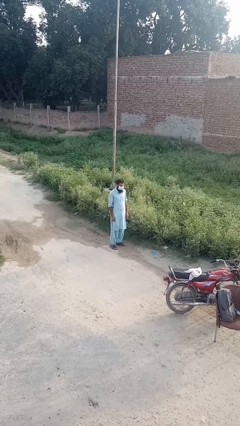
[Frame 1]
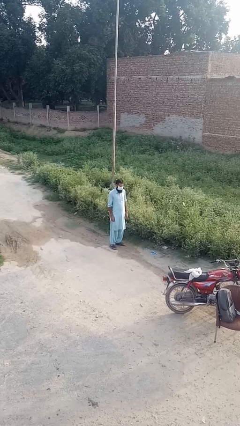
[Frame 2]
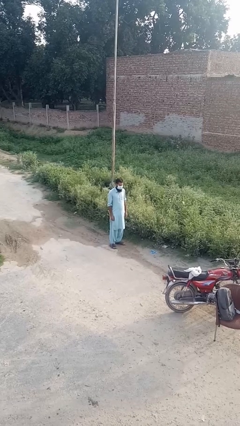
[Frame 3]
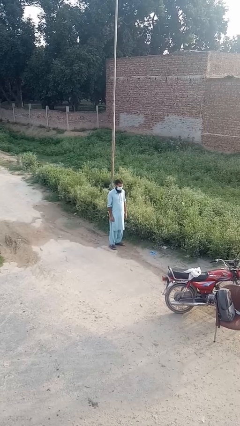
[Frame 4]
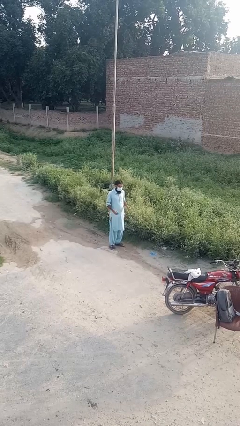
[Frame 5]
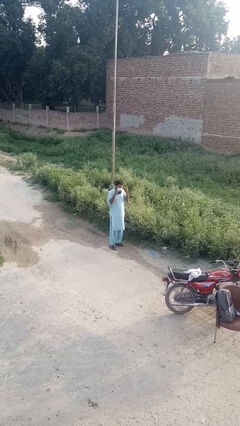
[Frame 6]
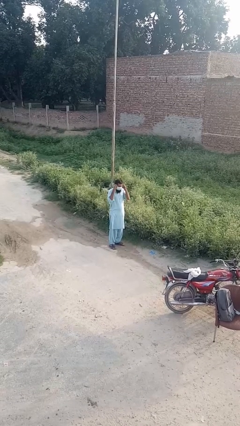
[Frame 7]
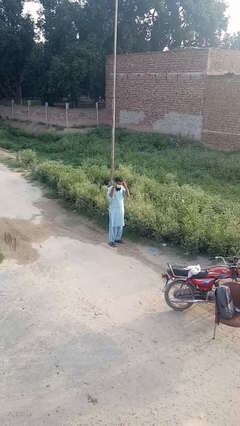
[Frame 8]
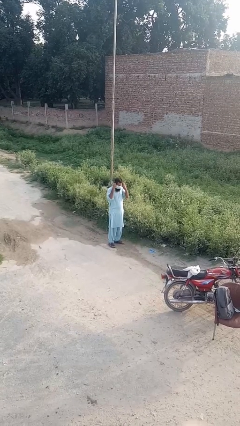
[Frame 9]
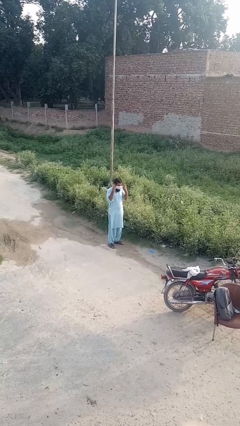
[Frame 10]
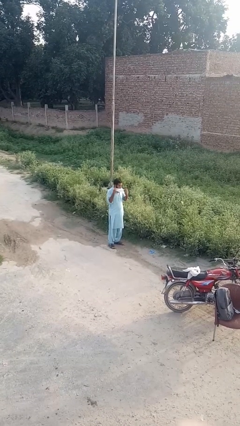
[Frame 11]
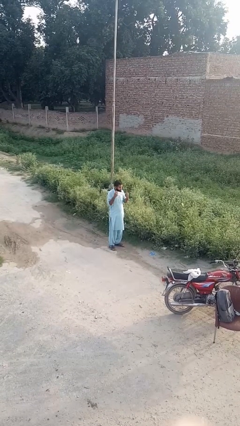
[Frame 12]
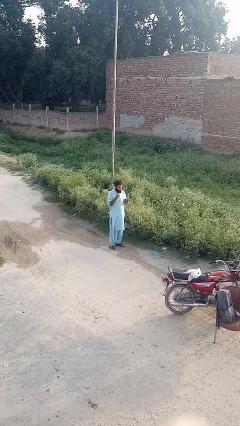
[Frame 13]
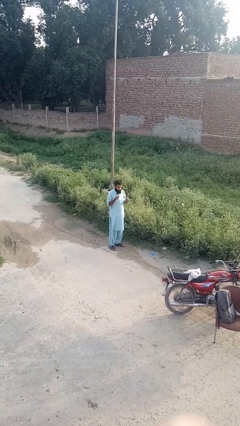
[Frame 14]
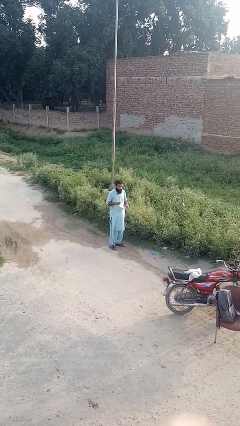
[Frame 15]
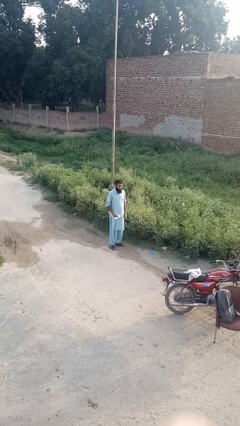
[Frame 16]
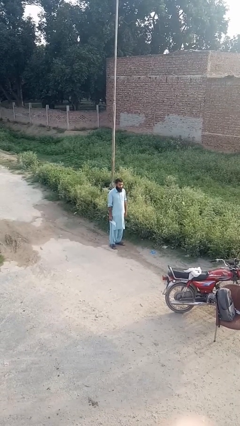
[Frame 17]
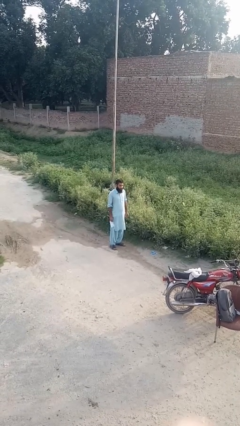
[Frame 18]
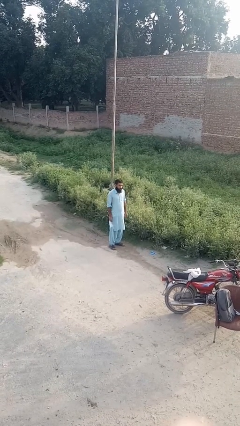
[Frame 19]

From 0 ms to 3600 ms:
person takes off facemask

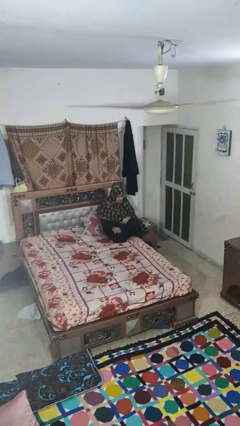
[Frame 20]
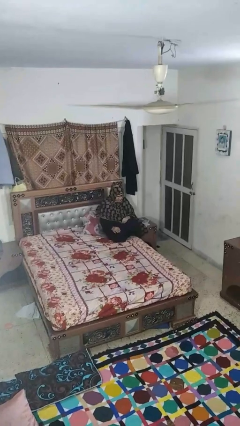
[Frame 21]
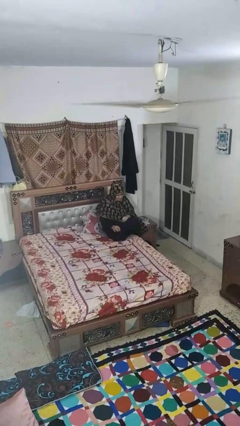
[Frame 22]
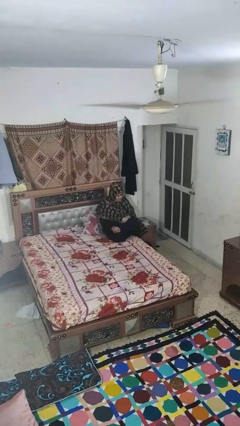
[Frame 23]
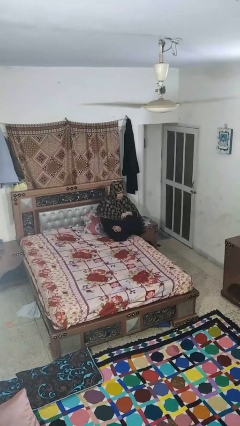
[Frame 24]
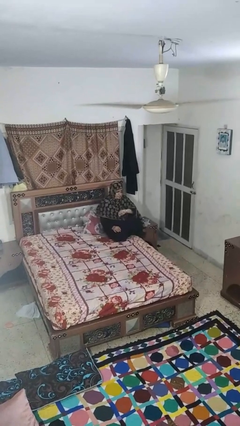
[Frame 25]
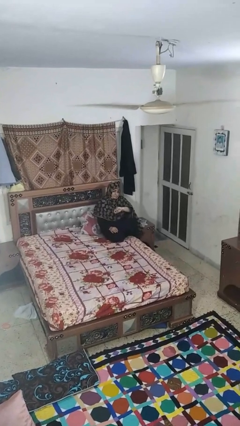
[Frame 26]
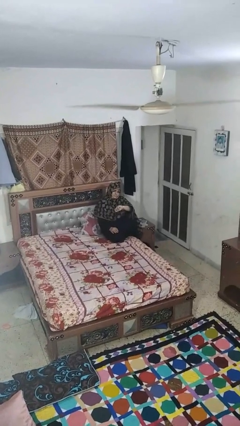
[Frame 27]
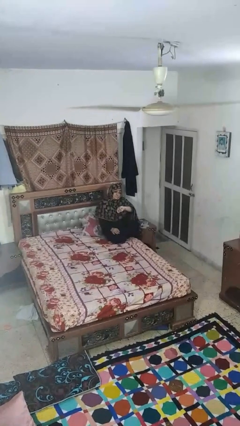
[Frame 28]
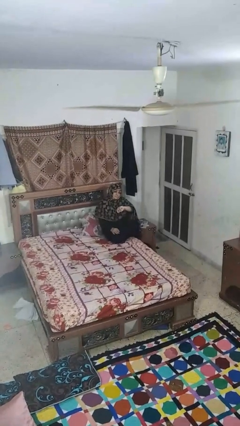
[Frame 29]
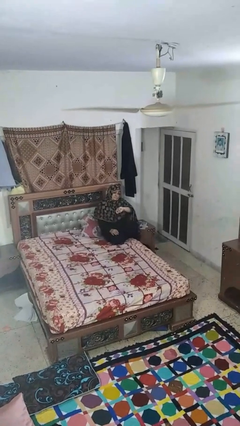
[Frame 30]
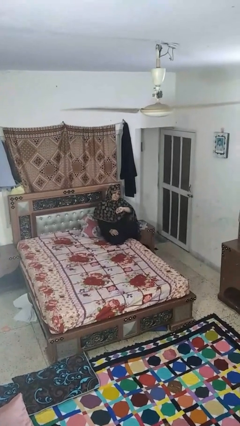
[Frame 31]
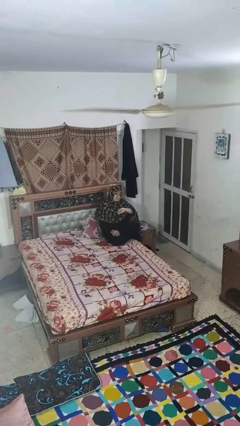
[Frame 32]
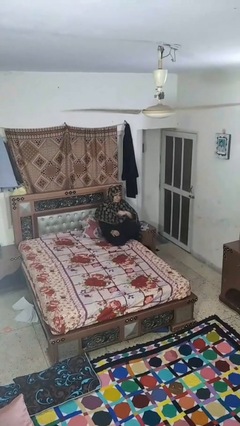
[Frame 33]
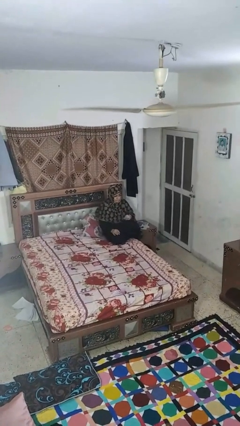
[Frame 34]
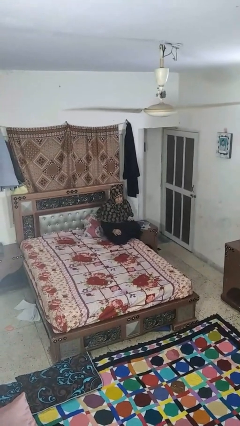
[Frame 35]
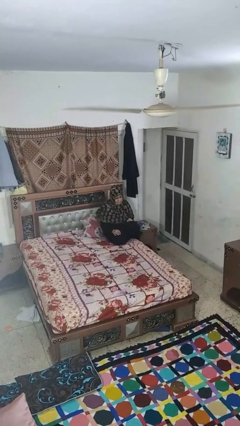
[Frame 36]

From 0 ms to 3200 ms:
person looks at wristwatch

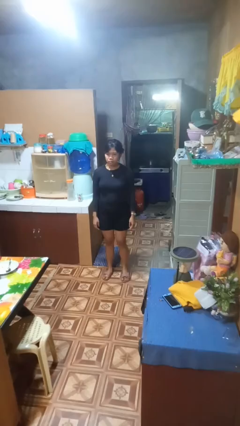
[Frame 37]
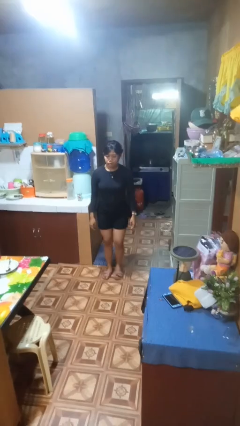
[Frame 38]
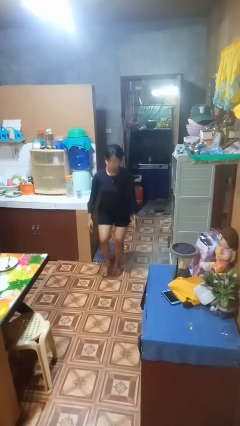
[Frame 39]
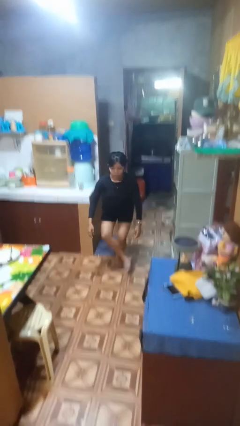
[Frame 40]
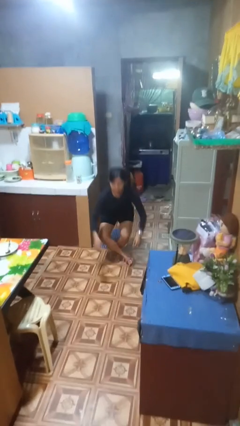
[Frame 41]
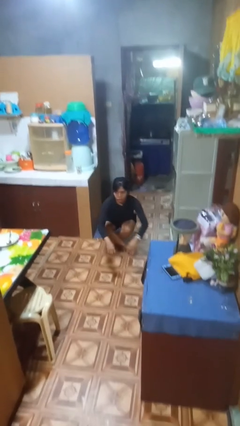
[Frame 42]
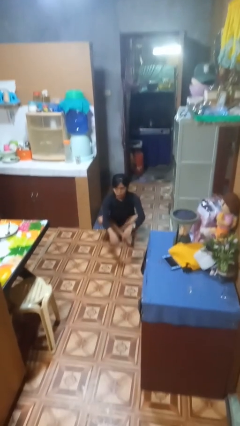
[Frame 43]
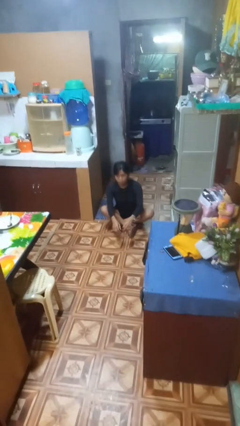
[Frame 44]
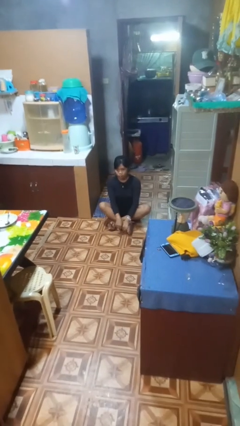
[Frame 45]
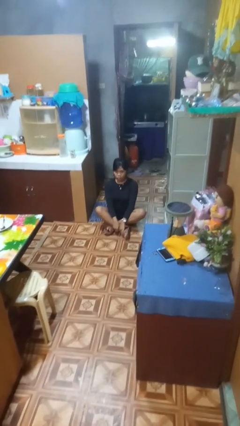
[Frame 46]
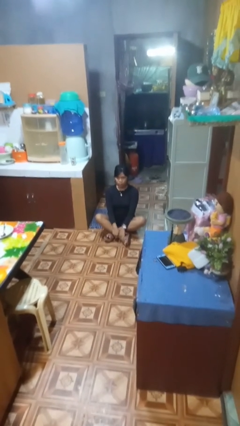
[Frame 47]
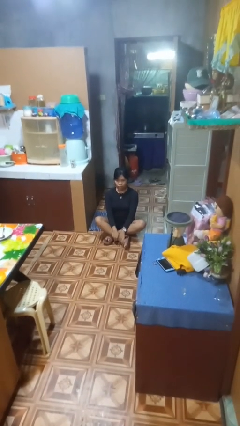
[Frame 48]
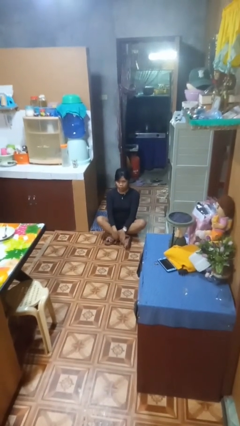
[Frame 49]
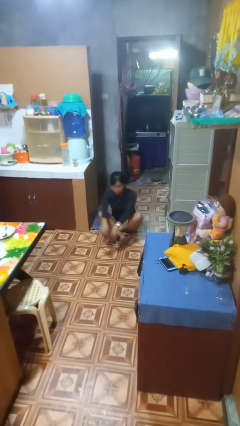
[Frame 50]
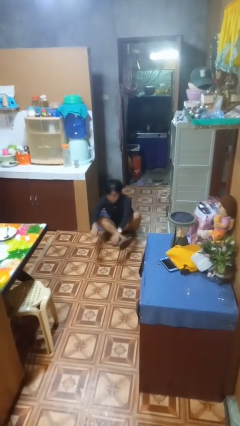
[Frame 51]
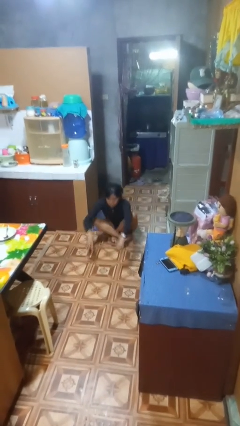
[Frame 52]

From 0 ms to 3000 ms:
person sits crisscross

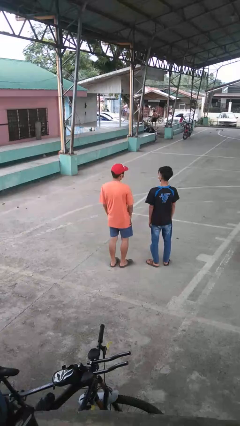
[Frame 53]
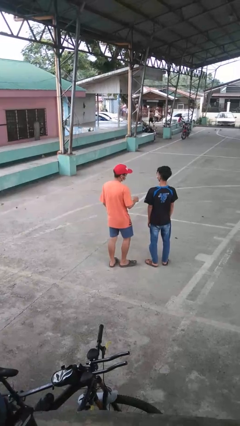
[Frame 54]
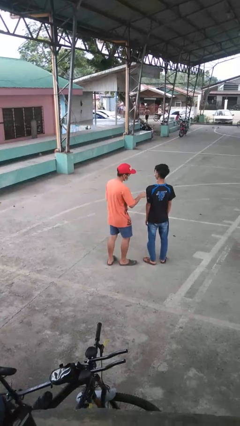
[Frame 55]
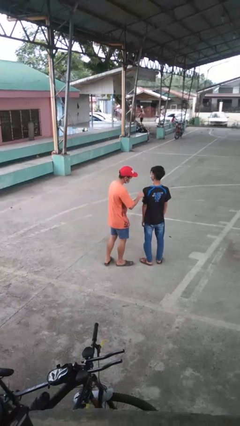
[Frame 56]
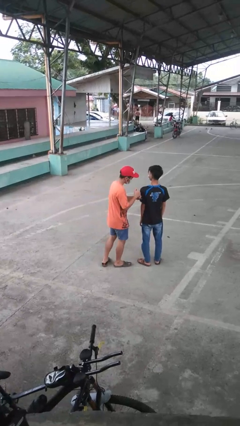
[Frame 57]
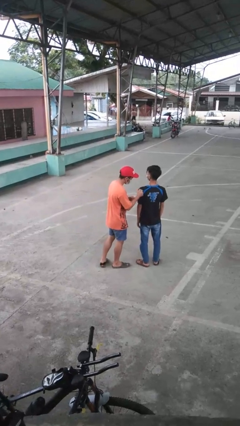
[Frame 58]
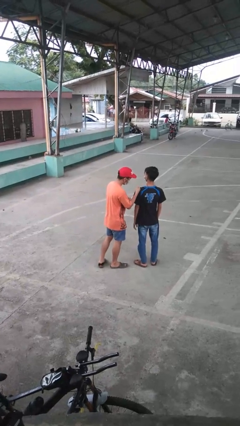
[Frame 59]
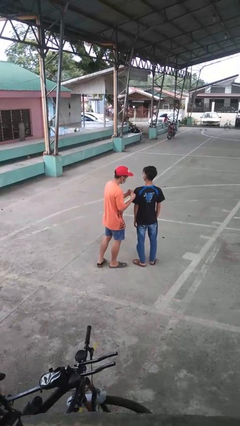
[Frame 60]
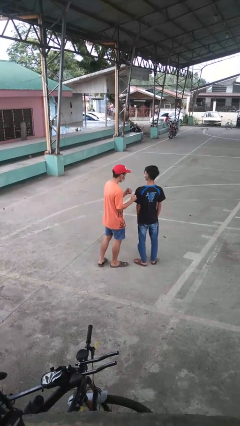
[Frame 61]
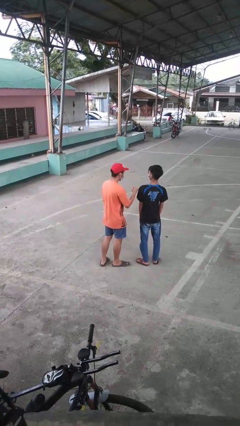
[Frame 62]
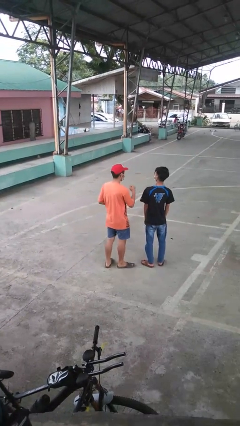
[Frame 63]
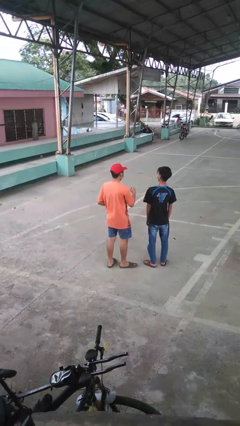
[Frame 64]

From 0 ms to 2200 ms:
person pounds shoulders of person

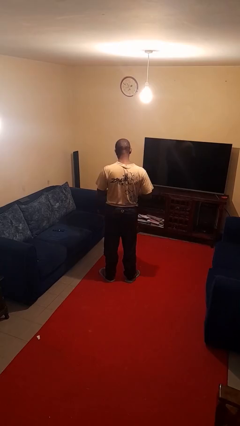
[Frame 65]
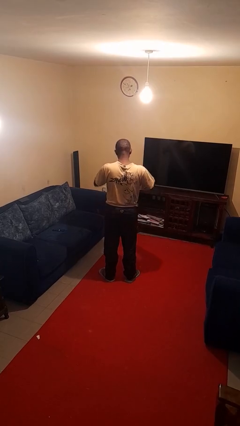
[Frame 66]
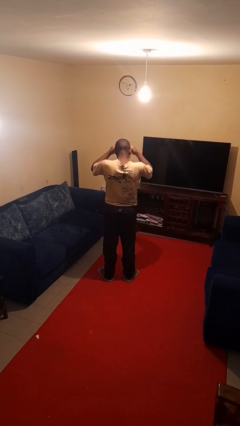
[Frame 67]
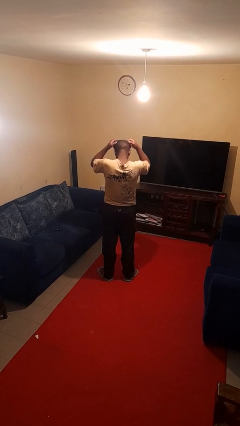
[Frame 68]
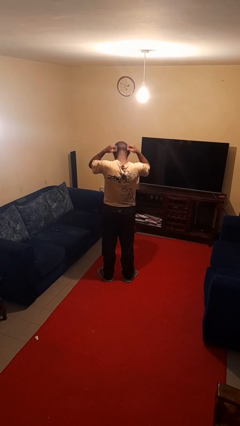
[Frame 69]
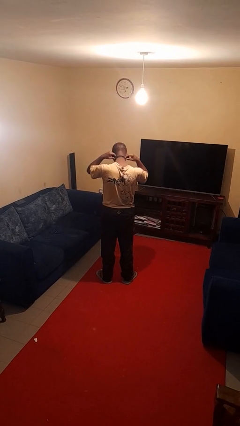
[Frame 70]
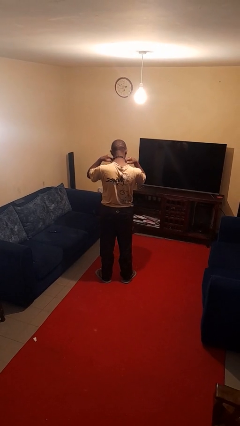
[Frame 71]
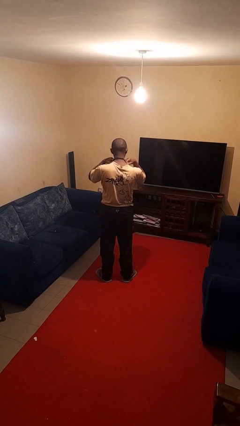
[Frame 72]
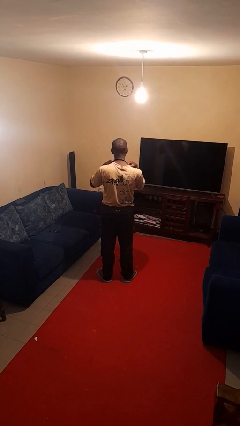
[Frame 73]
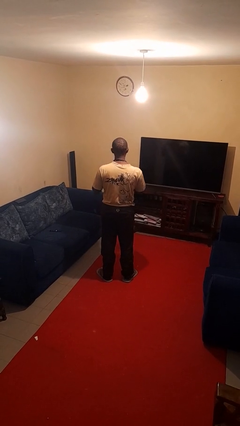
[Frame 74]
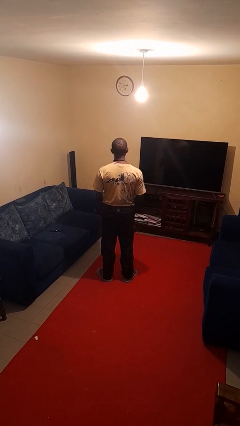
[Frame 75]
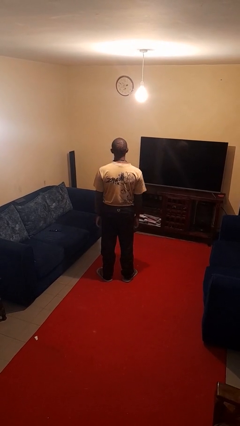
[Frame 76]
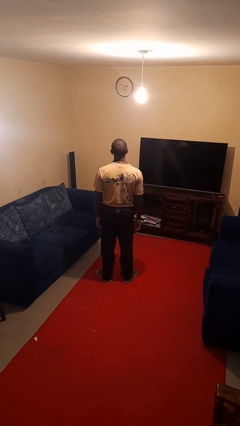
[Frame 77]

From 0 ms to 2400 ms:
person puts on necklace

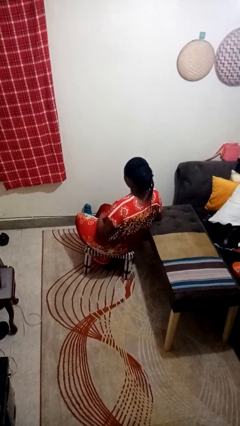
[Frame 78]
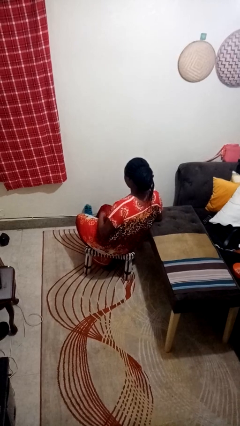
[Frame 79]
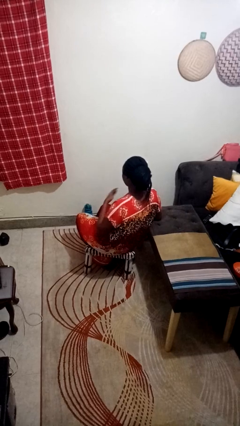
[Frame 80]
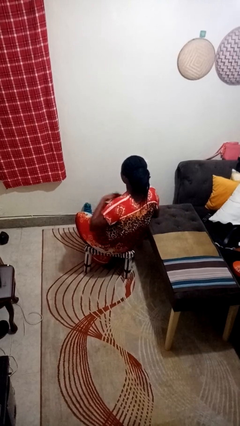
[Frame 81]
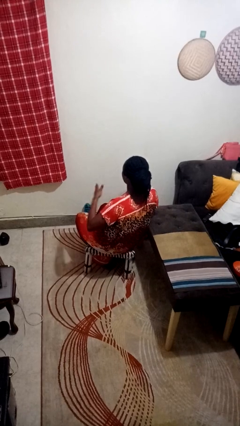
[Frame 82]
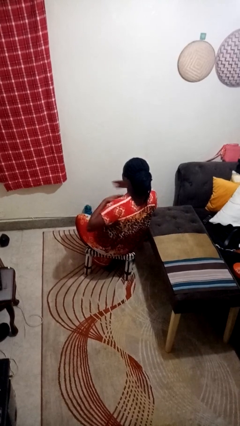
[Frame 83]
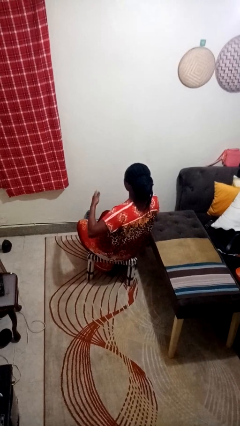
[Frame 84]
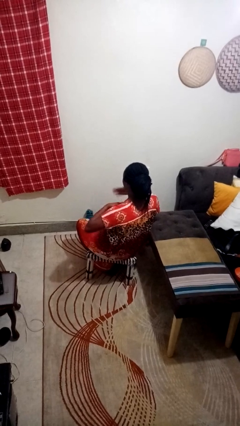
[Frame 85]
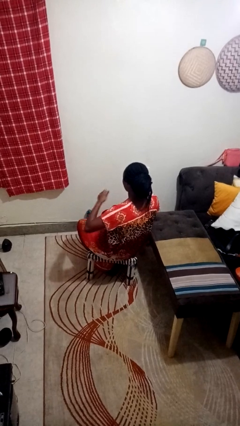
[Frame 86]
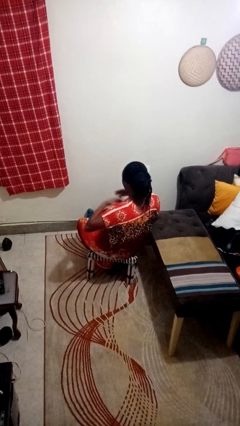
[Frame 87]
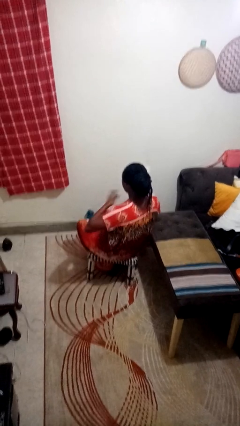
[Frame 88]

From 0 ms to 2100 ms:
person drums on chest

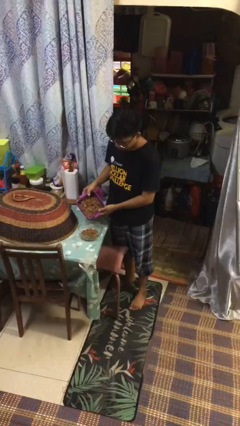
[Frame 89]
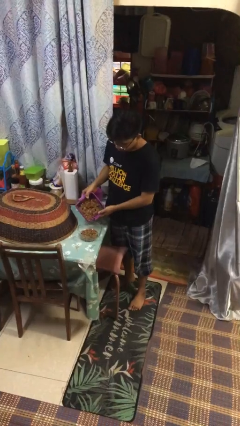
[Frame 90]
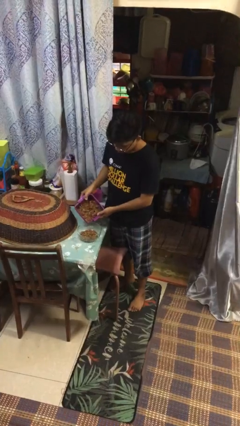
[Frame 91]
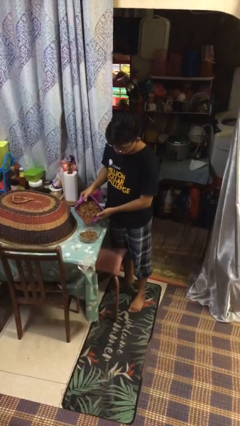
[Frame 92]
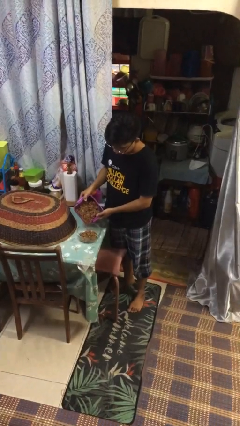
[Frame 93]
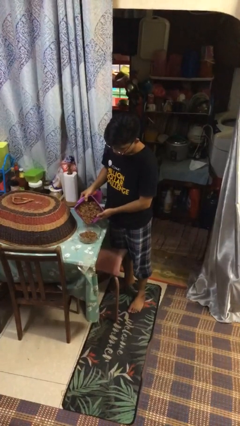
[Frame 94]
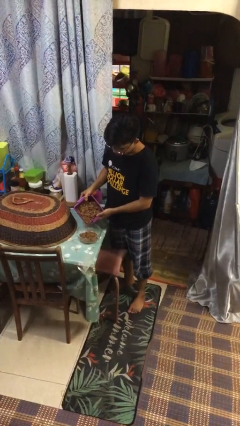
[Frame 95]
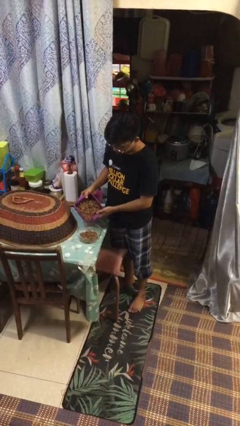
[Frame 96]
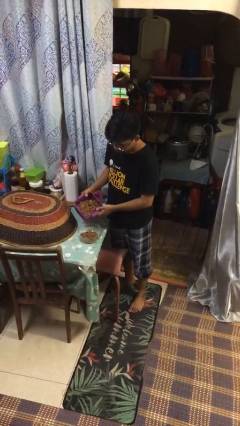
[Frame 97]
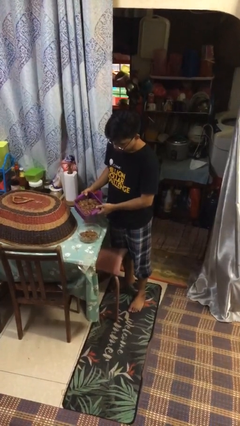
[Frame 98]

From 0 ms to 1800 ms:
person pours into bowl
